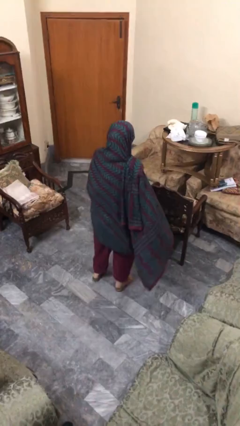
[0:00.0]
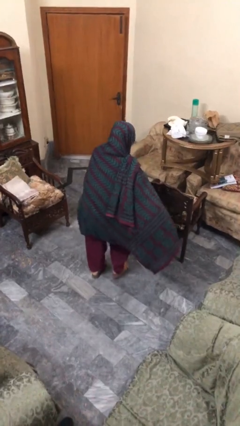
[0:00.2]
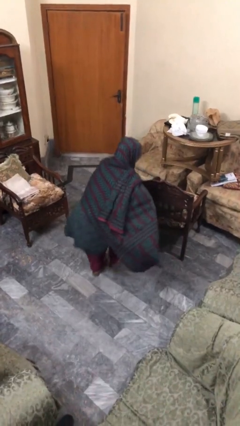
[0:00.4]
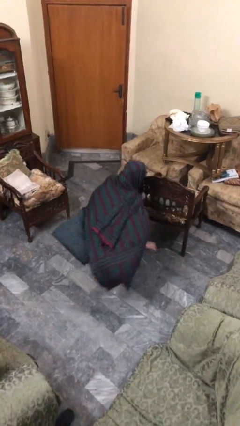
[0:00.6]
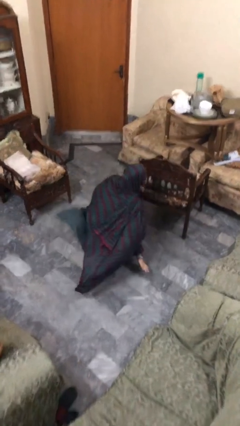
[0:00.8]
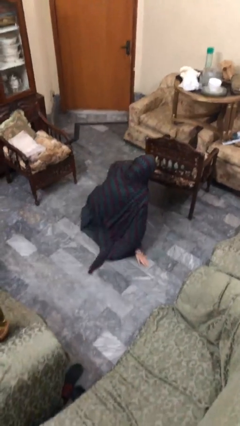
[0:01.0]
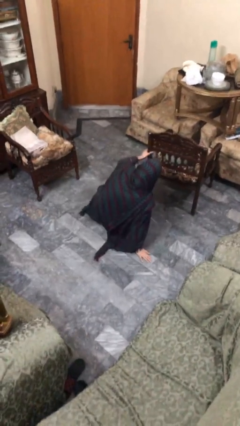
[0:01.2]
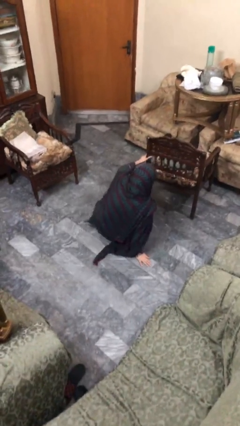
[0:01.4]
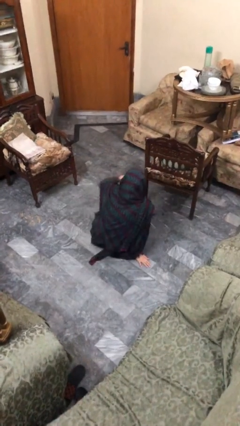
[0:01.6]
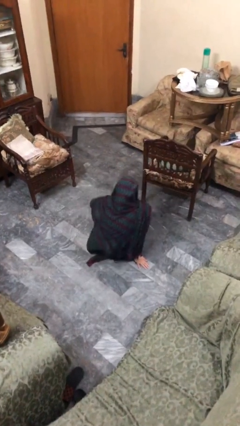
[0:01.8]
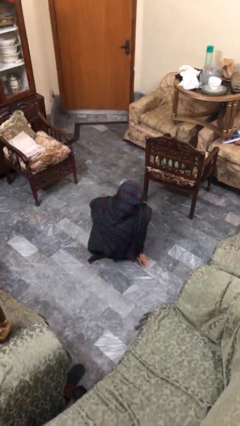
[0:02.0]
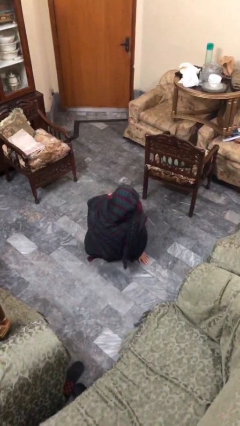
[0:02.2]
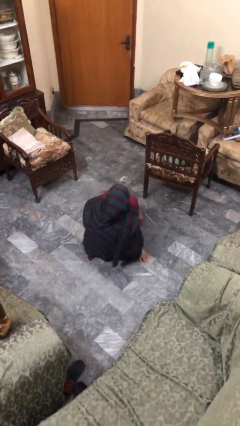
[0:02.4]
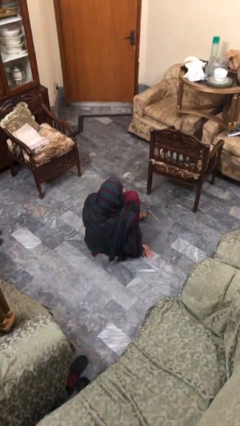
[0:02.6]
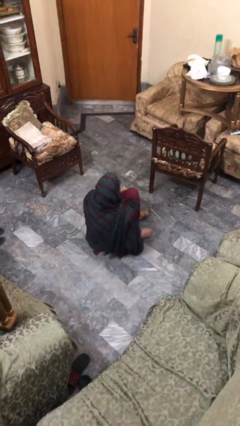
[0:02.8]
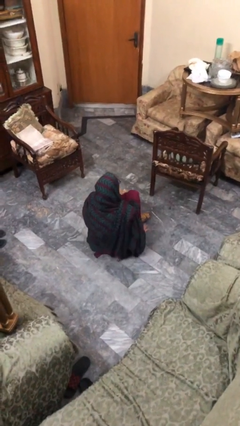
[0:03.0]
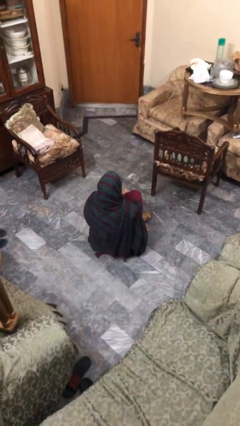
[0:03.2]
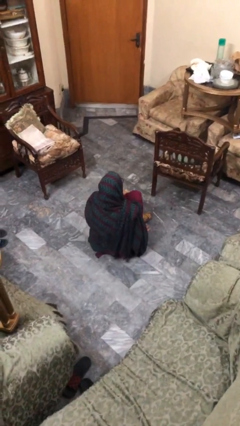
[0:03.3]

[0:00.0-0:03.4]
person sits crisscross

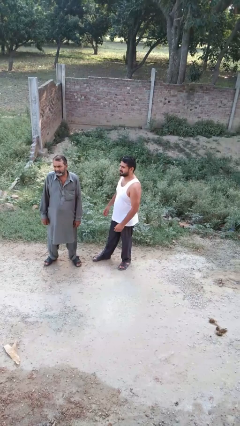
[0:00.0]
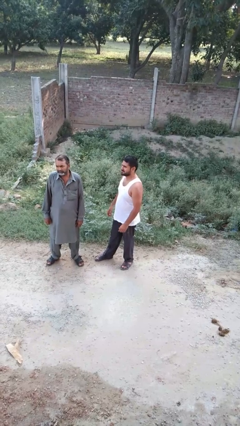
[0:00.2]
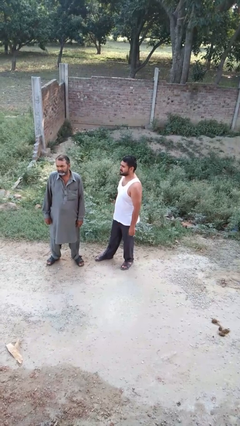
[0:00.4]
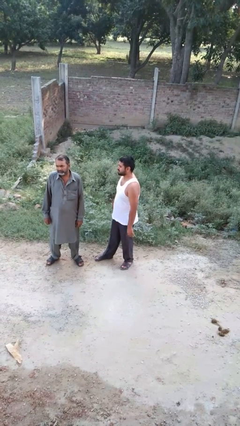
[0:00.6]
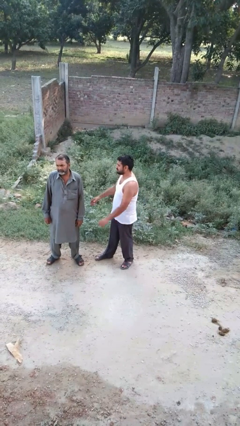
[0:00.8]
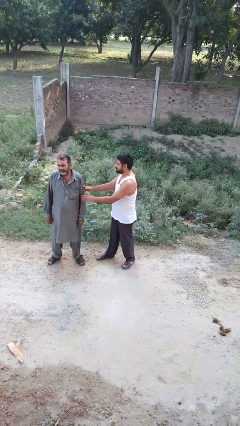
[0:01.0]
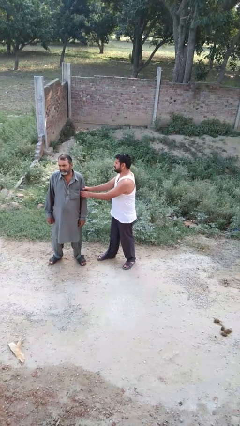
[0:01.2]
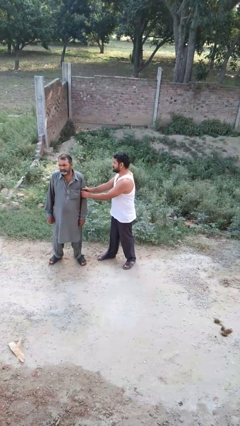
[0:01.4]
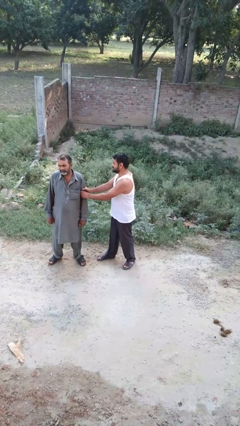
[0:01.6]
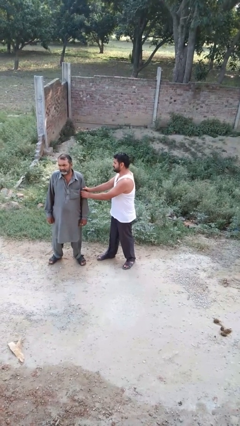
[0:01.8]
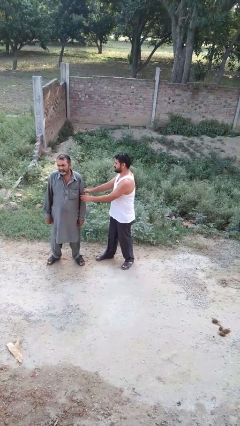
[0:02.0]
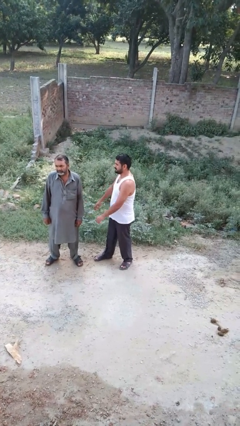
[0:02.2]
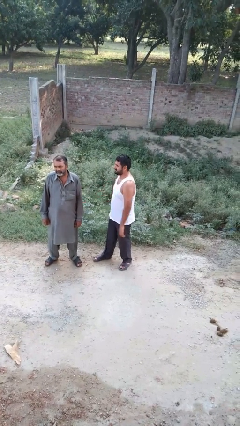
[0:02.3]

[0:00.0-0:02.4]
person grabs person by forearm

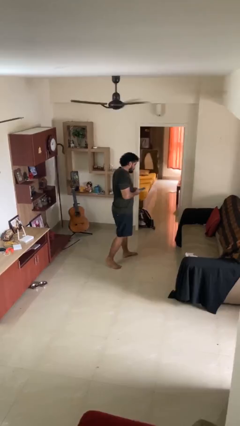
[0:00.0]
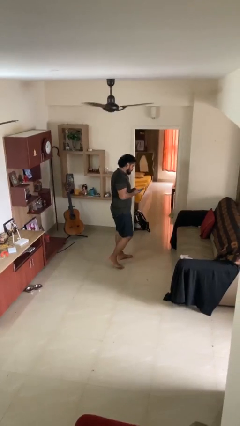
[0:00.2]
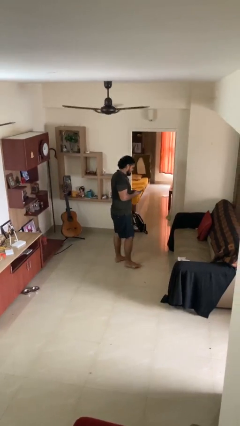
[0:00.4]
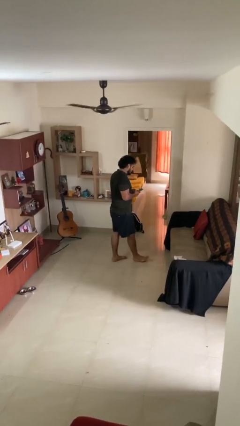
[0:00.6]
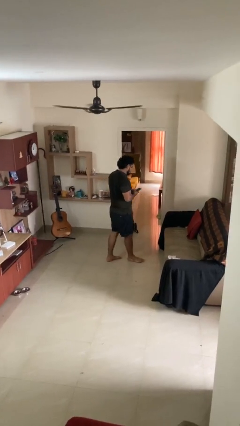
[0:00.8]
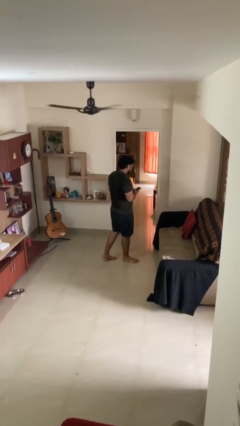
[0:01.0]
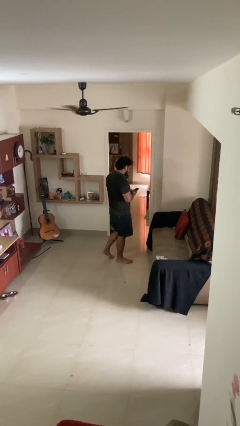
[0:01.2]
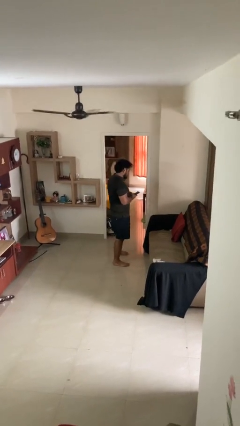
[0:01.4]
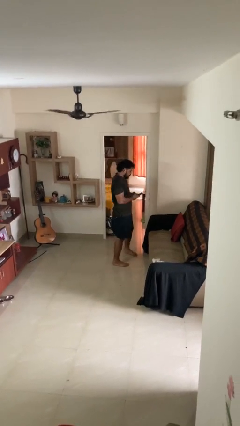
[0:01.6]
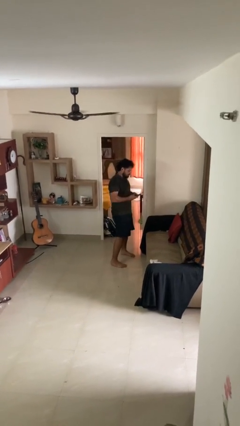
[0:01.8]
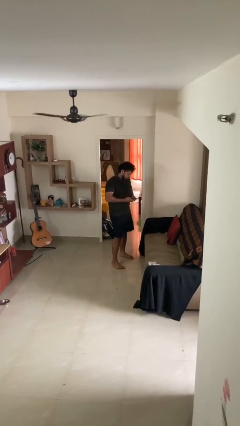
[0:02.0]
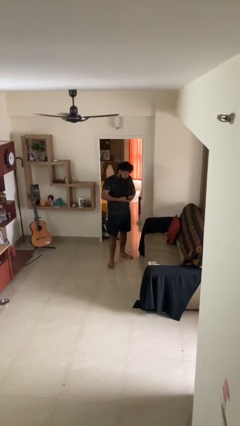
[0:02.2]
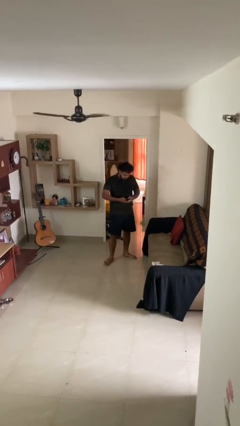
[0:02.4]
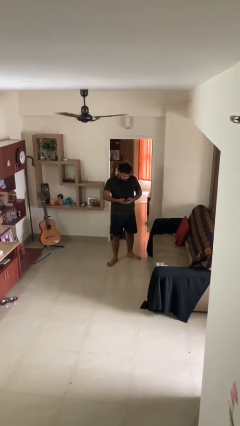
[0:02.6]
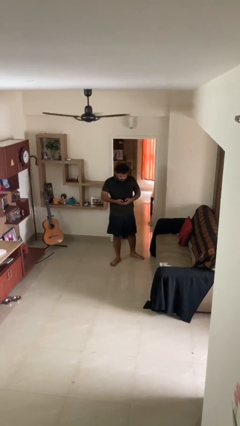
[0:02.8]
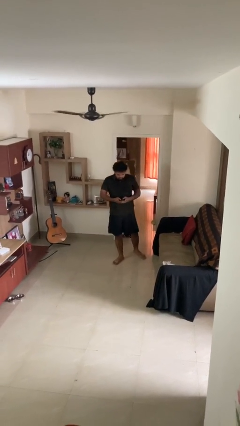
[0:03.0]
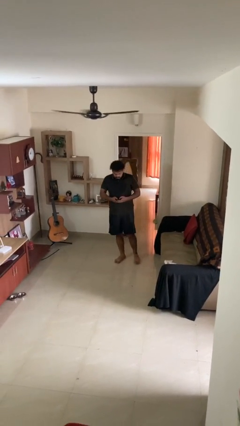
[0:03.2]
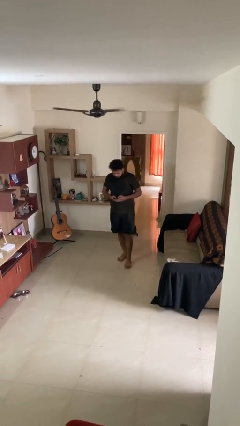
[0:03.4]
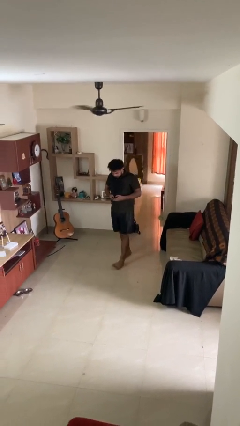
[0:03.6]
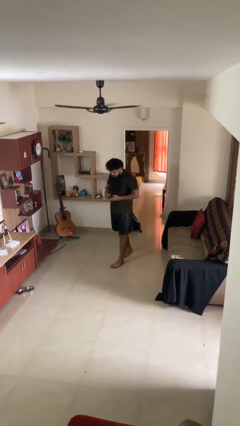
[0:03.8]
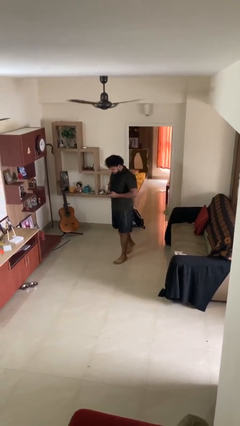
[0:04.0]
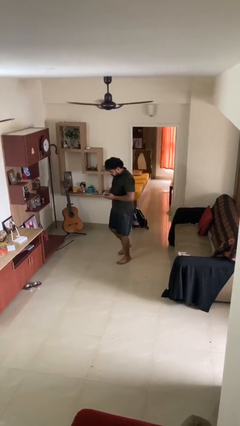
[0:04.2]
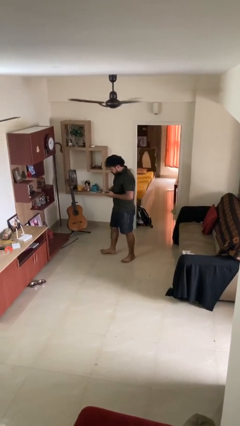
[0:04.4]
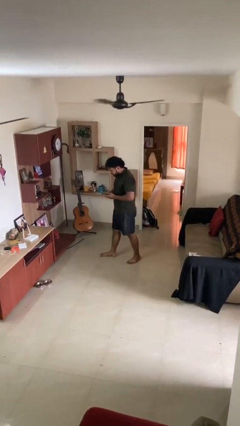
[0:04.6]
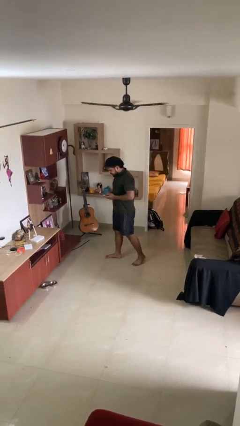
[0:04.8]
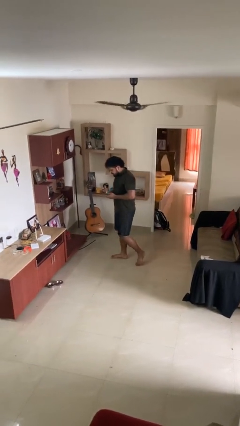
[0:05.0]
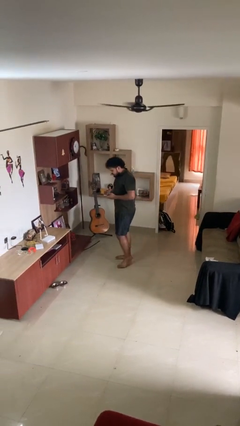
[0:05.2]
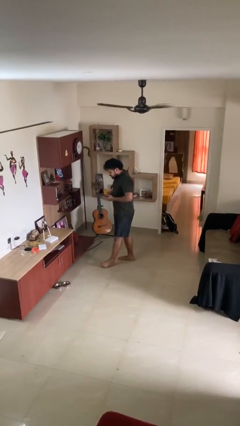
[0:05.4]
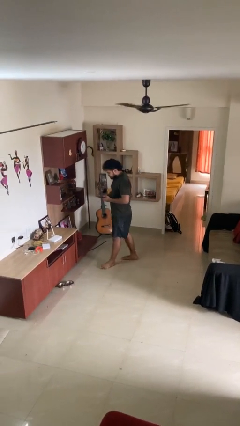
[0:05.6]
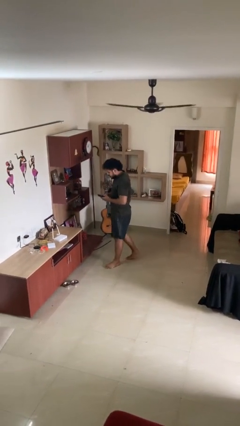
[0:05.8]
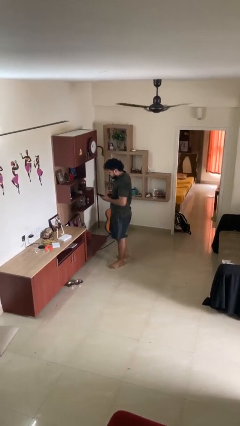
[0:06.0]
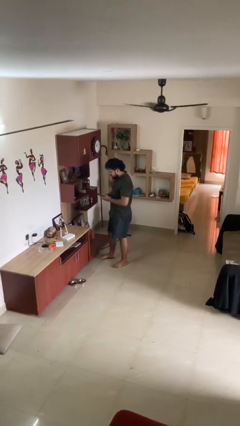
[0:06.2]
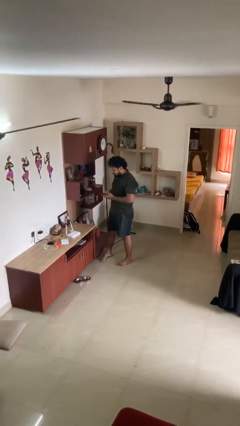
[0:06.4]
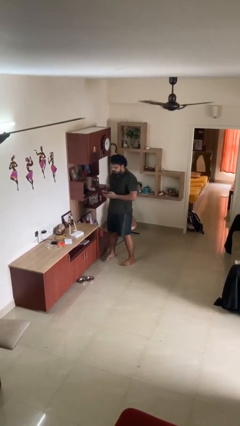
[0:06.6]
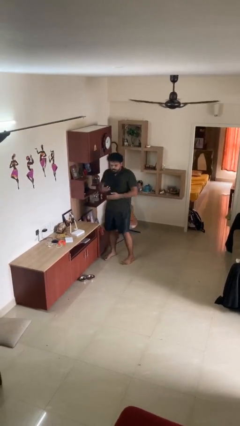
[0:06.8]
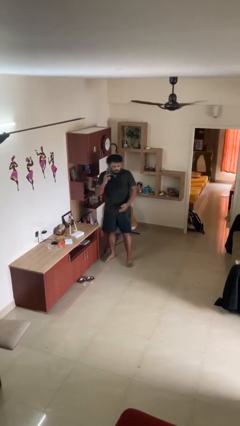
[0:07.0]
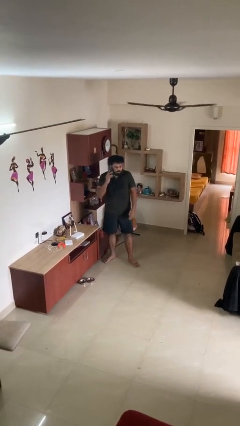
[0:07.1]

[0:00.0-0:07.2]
person texts on phone

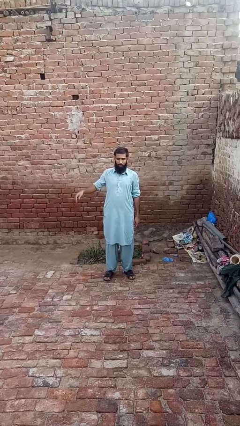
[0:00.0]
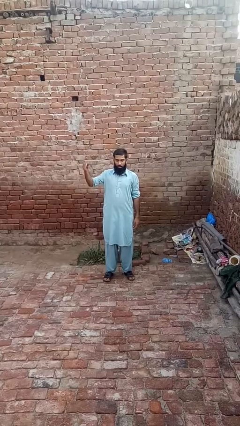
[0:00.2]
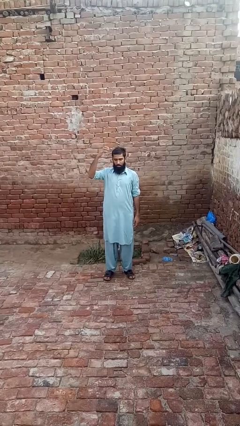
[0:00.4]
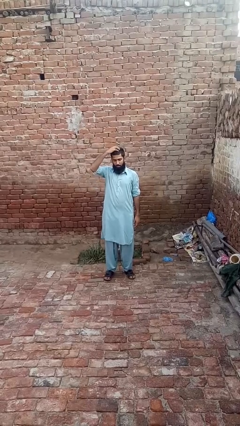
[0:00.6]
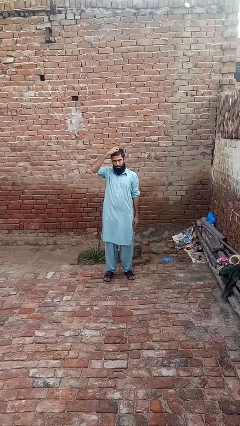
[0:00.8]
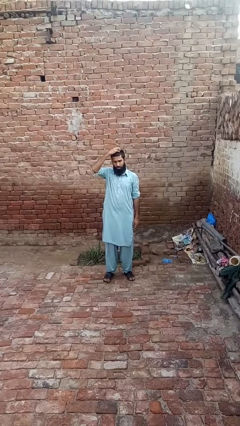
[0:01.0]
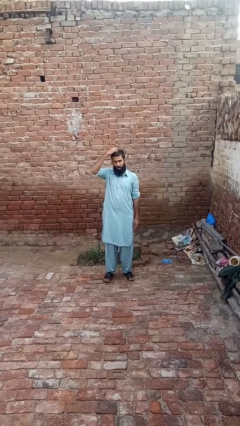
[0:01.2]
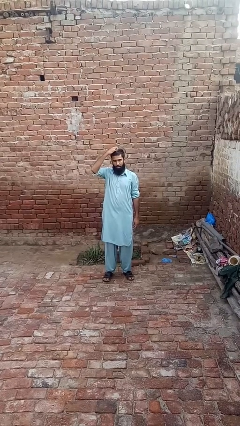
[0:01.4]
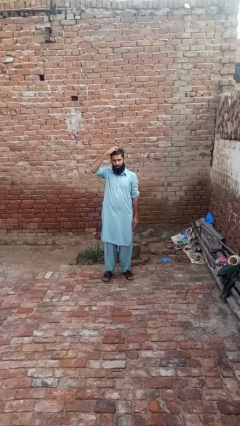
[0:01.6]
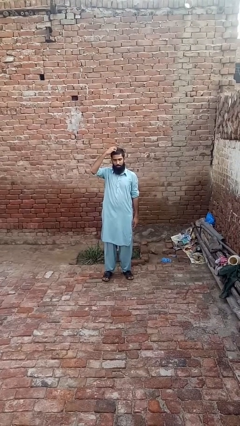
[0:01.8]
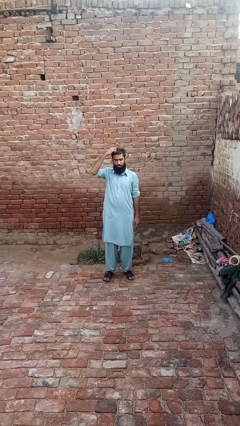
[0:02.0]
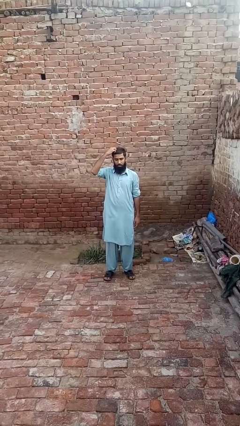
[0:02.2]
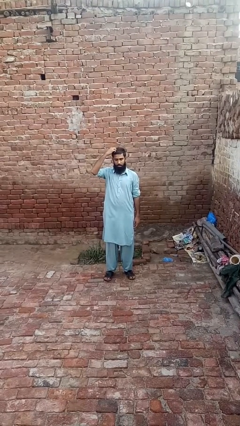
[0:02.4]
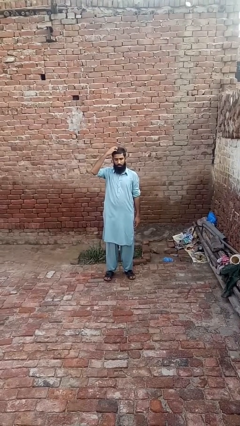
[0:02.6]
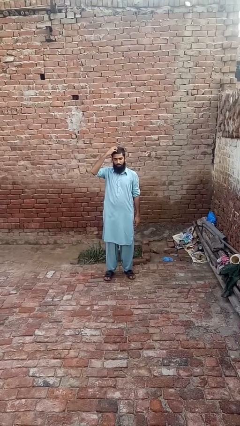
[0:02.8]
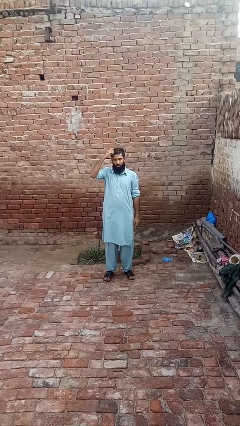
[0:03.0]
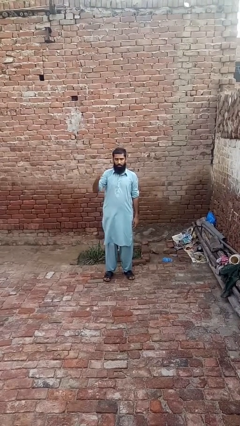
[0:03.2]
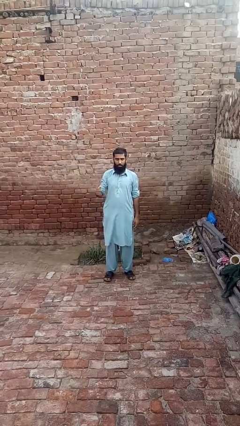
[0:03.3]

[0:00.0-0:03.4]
person scratches face

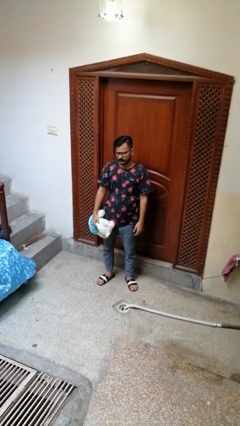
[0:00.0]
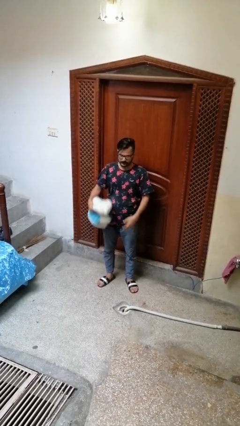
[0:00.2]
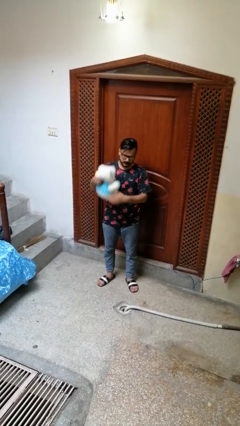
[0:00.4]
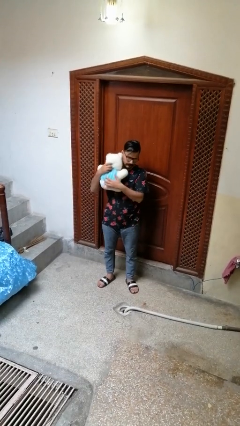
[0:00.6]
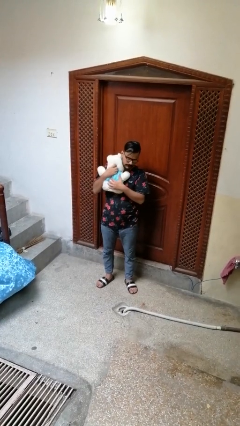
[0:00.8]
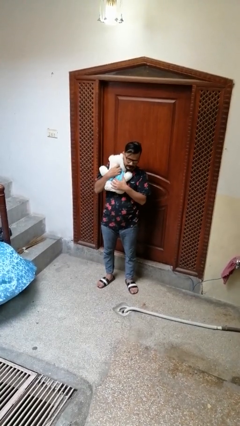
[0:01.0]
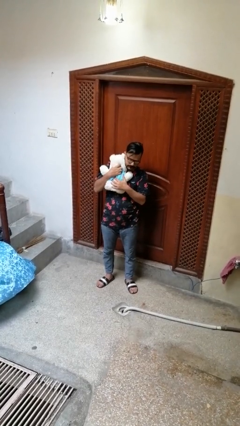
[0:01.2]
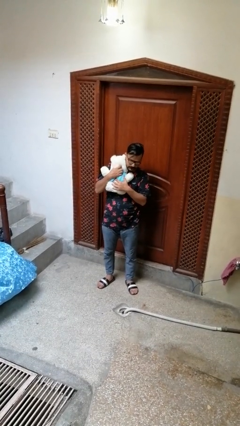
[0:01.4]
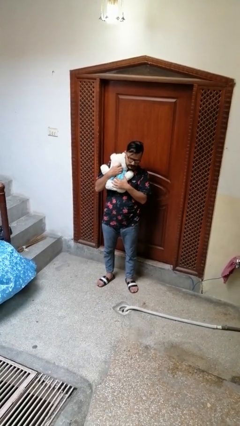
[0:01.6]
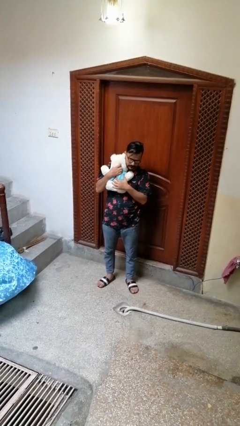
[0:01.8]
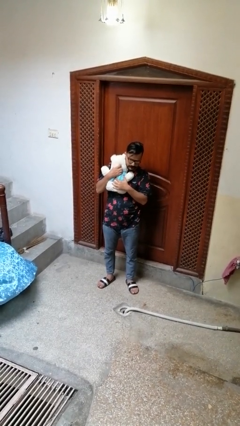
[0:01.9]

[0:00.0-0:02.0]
person hugs stuffed animal
